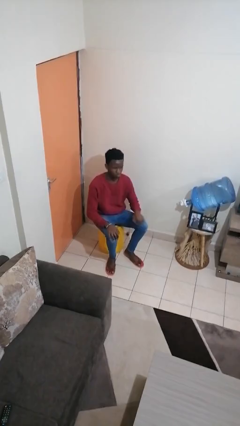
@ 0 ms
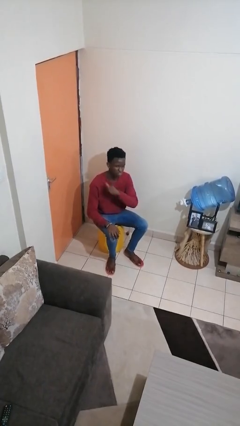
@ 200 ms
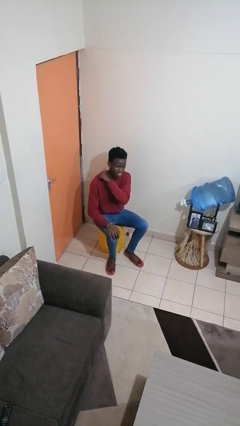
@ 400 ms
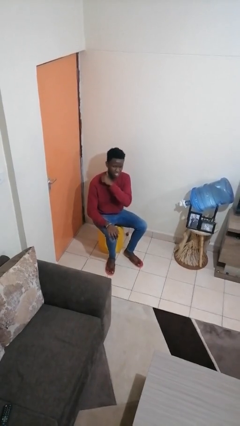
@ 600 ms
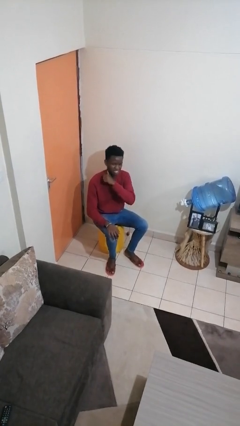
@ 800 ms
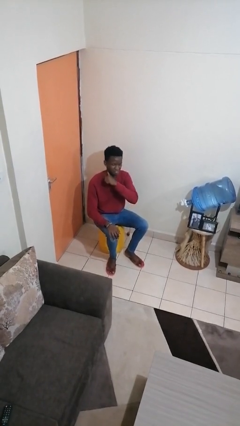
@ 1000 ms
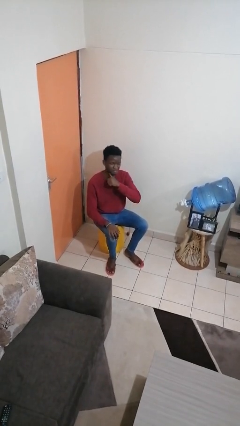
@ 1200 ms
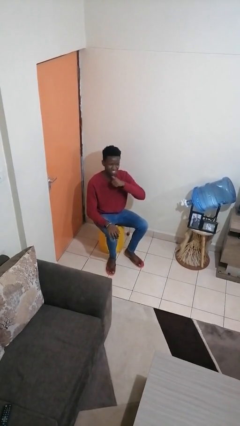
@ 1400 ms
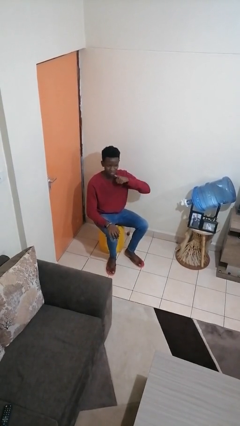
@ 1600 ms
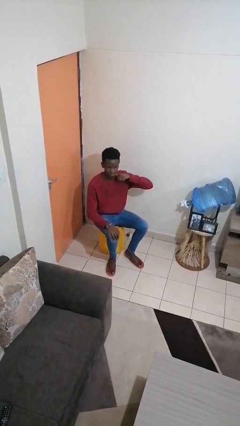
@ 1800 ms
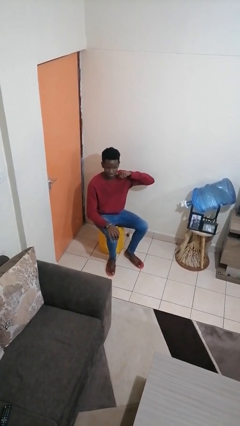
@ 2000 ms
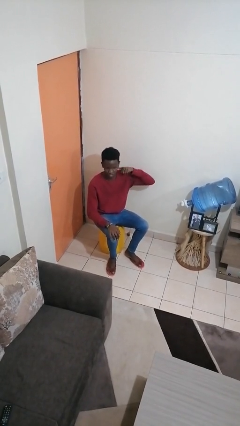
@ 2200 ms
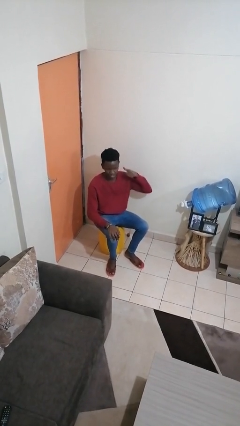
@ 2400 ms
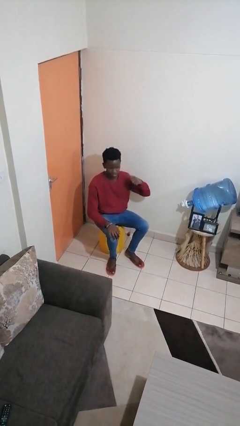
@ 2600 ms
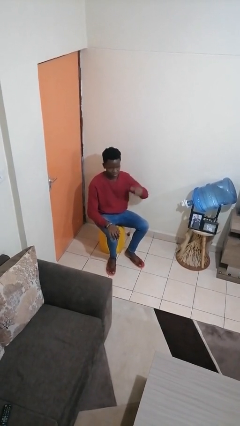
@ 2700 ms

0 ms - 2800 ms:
person gestures cut

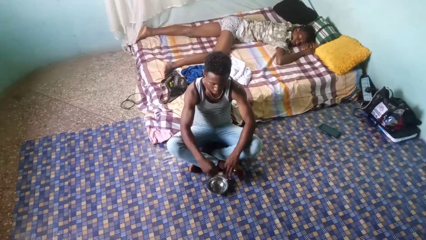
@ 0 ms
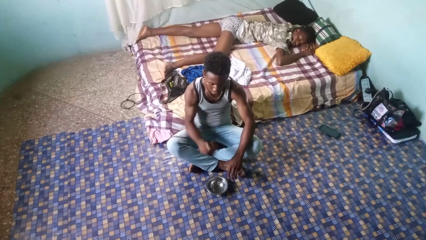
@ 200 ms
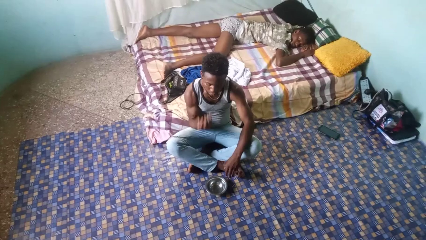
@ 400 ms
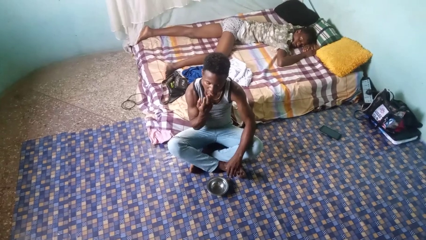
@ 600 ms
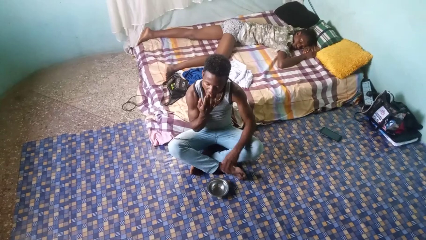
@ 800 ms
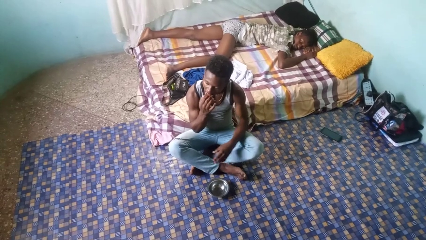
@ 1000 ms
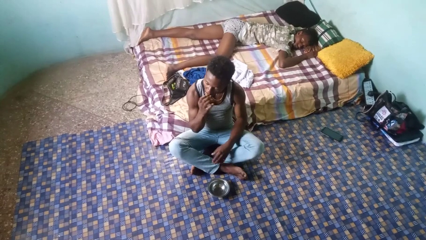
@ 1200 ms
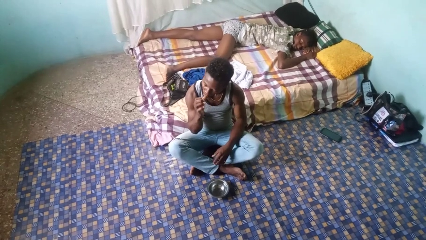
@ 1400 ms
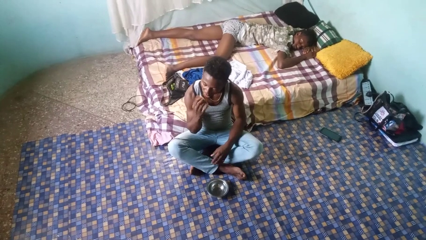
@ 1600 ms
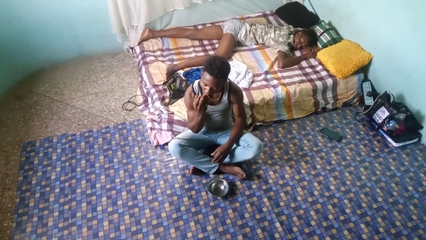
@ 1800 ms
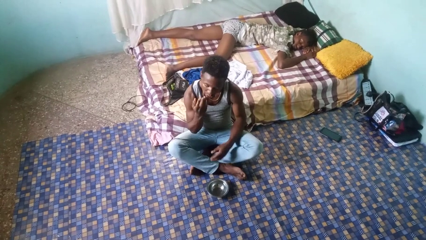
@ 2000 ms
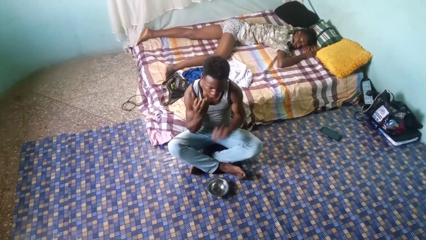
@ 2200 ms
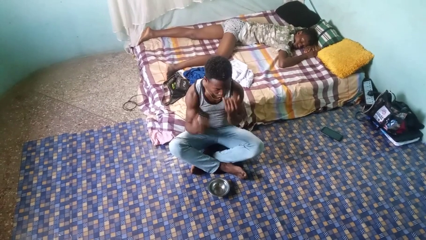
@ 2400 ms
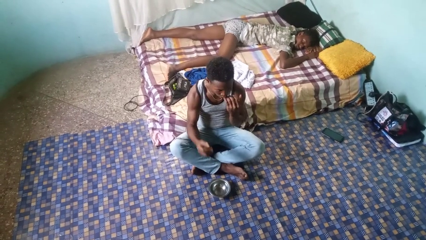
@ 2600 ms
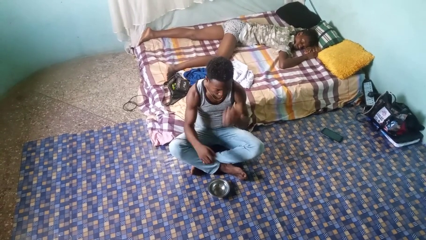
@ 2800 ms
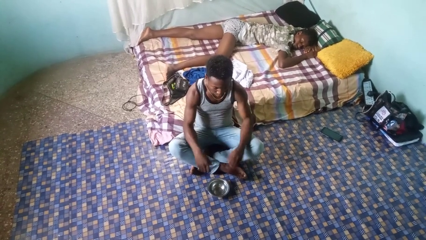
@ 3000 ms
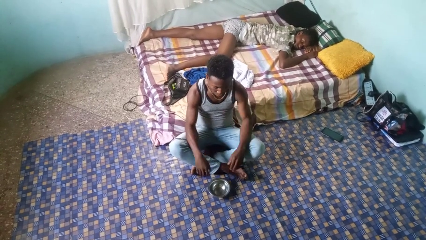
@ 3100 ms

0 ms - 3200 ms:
person licks fingers

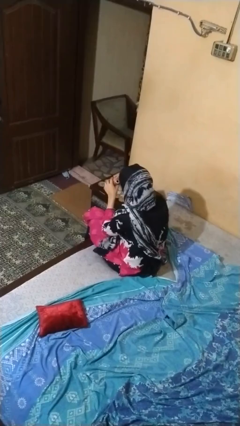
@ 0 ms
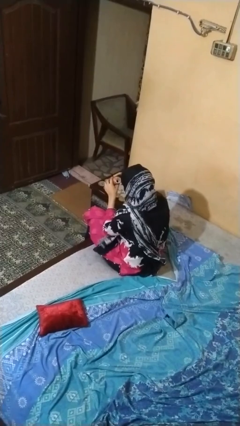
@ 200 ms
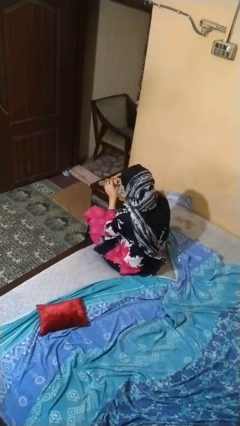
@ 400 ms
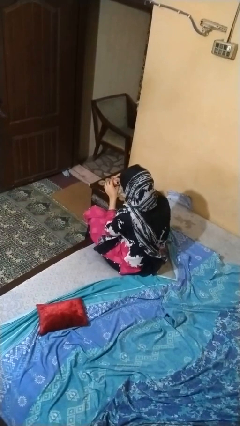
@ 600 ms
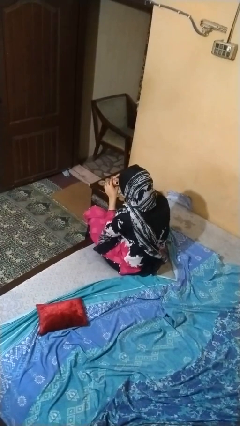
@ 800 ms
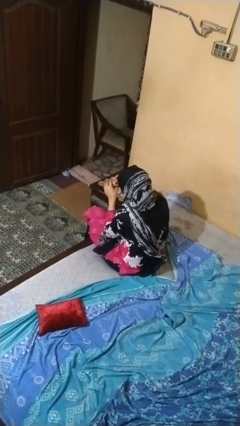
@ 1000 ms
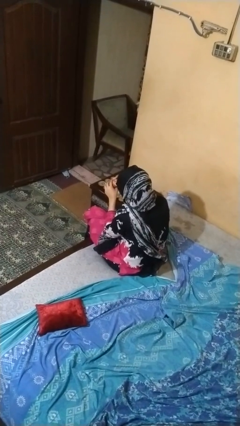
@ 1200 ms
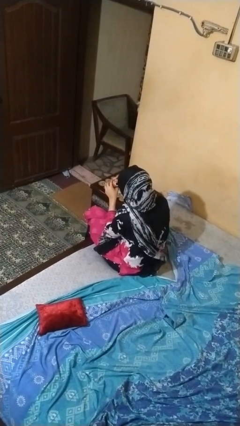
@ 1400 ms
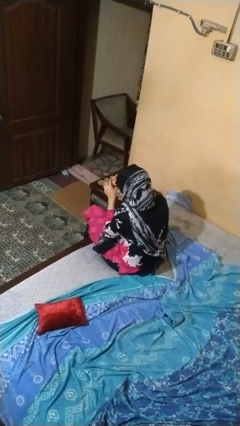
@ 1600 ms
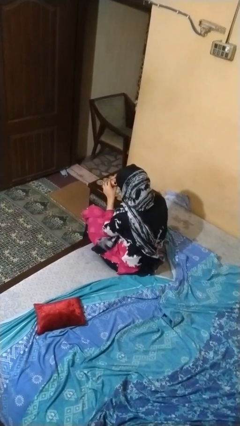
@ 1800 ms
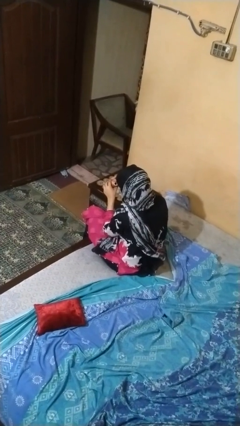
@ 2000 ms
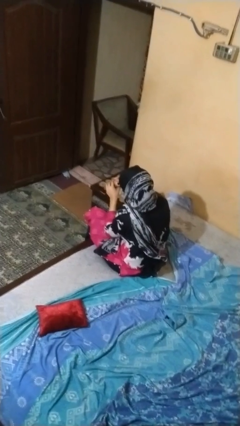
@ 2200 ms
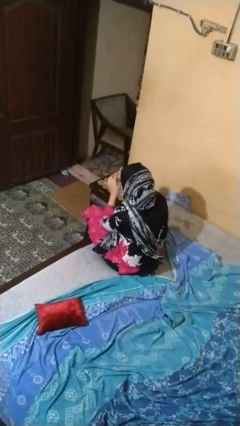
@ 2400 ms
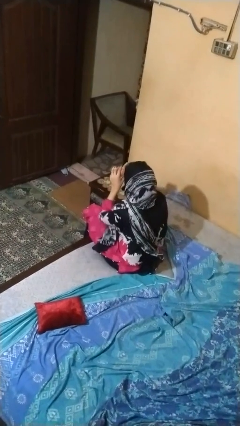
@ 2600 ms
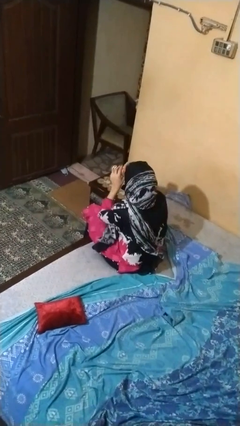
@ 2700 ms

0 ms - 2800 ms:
person opens beverage can

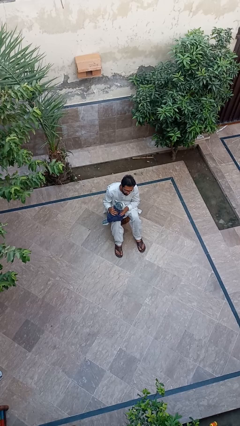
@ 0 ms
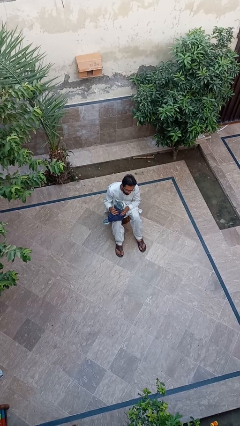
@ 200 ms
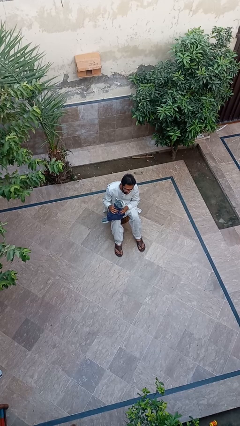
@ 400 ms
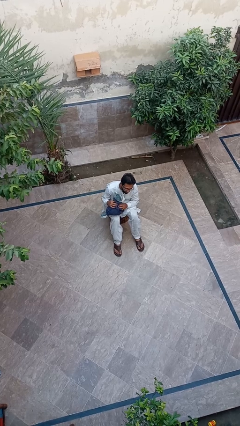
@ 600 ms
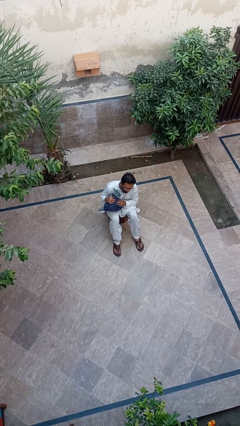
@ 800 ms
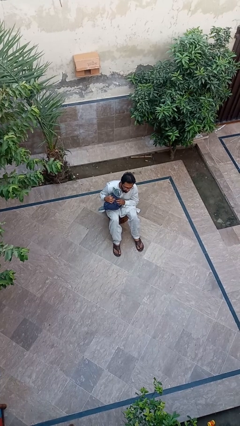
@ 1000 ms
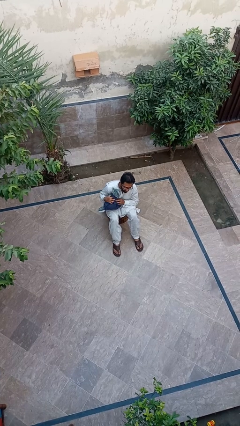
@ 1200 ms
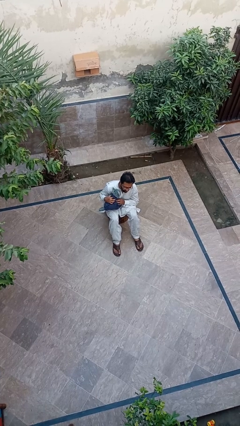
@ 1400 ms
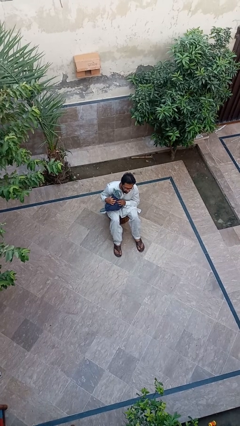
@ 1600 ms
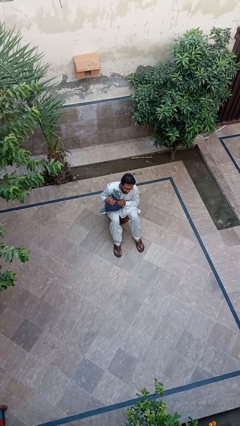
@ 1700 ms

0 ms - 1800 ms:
person hugs cat

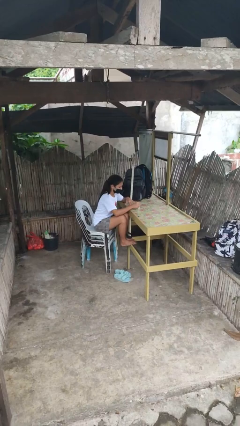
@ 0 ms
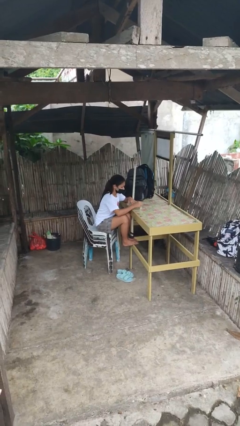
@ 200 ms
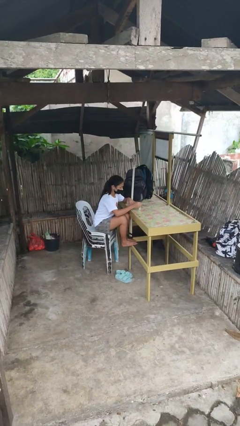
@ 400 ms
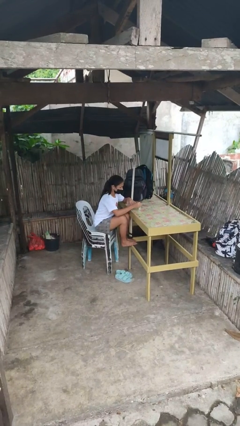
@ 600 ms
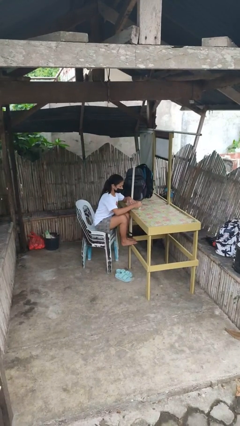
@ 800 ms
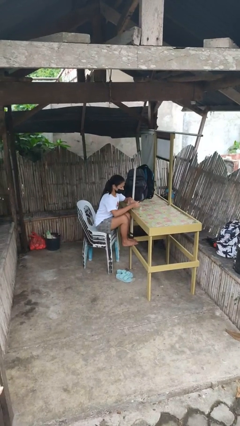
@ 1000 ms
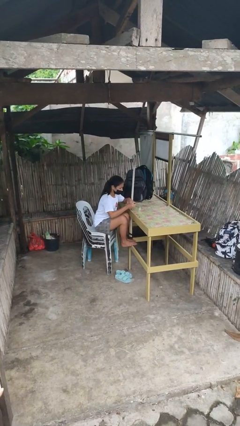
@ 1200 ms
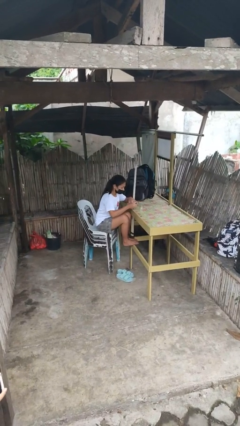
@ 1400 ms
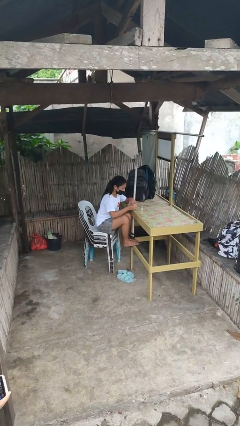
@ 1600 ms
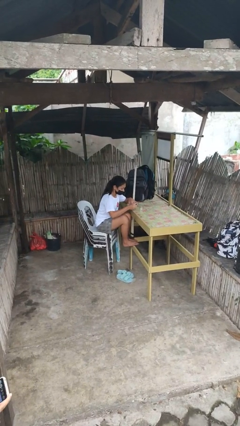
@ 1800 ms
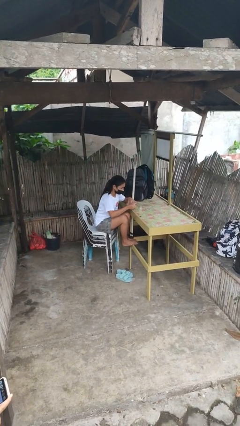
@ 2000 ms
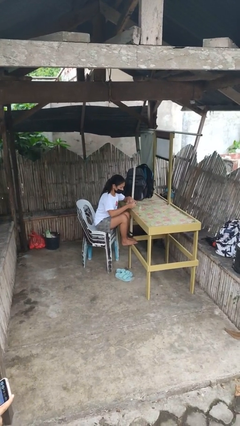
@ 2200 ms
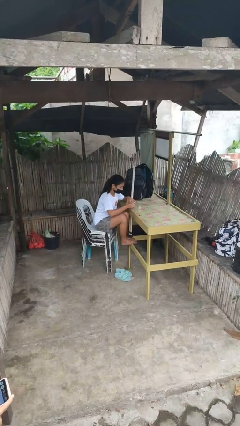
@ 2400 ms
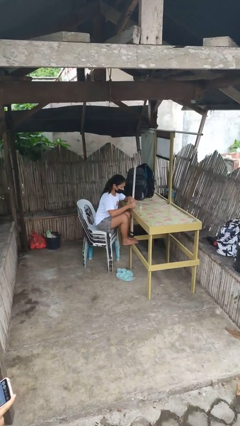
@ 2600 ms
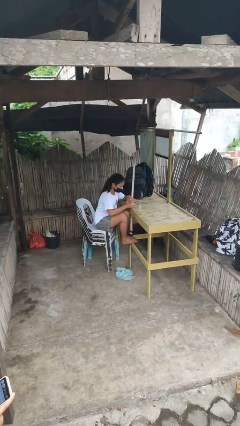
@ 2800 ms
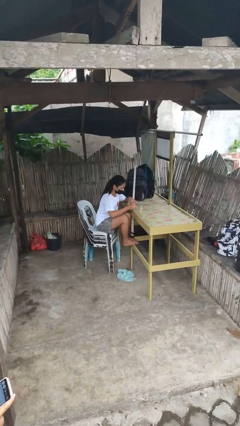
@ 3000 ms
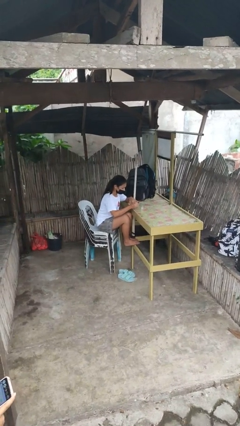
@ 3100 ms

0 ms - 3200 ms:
person paints fingernails

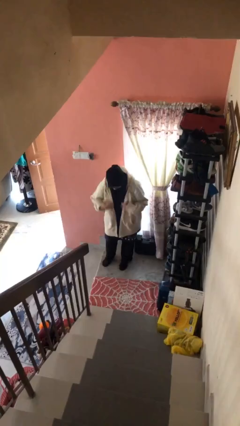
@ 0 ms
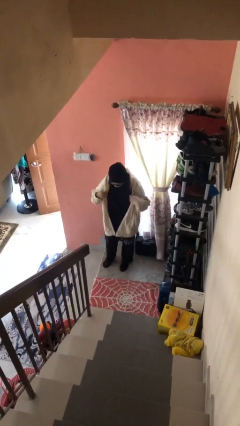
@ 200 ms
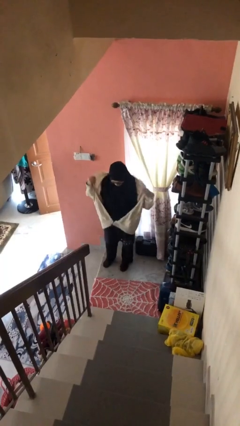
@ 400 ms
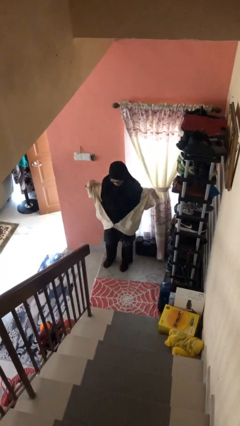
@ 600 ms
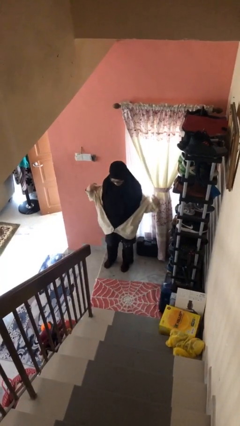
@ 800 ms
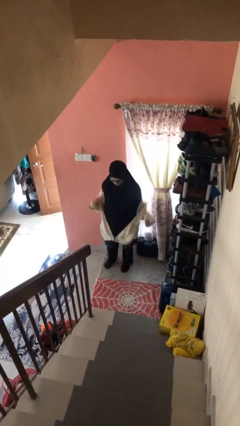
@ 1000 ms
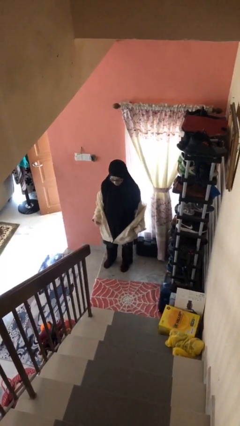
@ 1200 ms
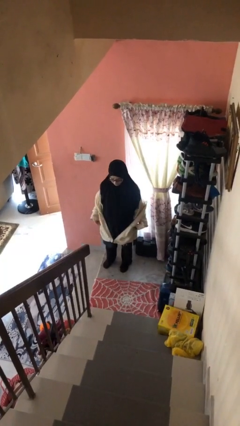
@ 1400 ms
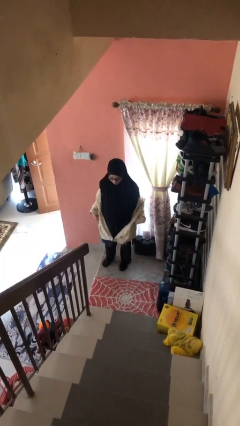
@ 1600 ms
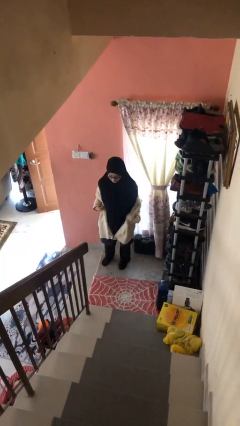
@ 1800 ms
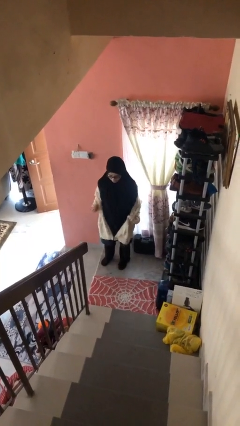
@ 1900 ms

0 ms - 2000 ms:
person takes off jacket

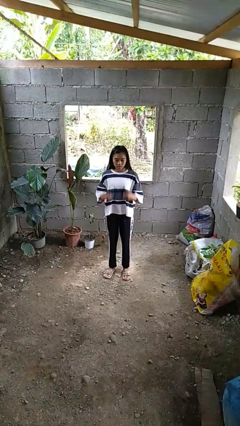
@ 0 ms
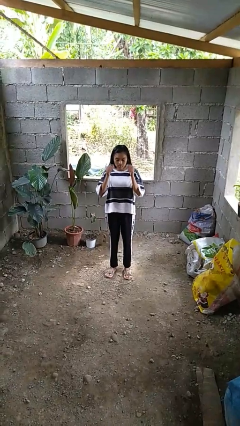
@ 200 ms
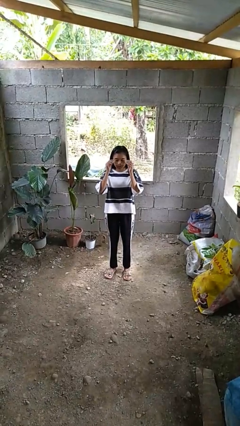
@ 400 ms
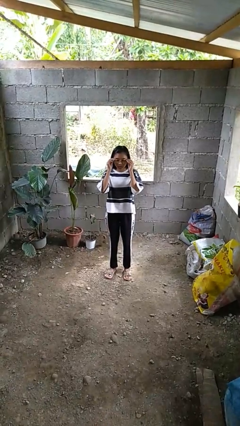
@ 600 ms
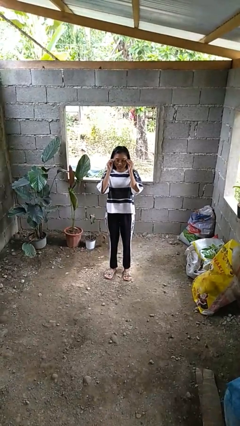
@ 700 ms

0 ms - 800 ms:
person puts on glasses

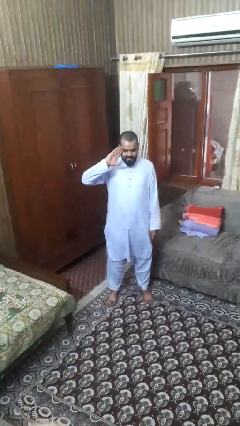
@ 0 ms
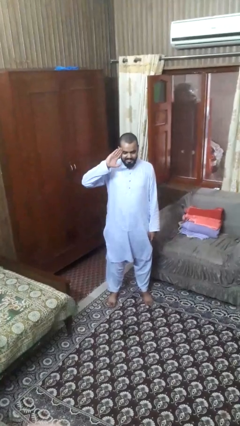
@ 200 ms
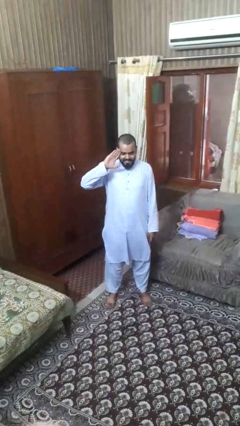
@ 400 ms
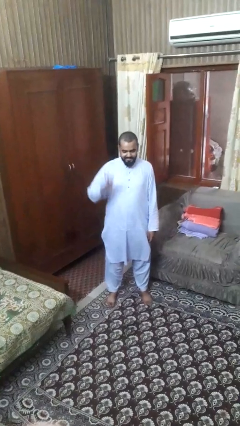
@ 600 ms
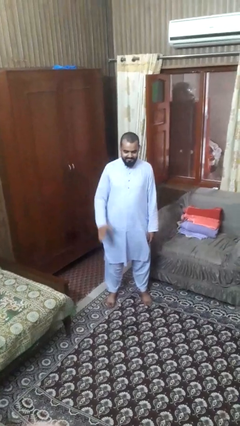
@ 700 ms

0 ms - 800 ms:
person salutes
